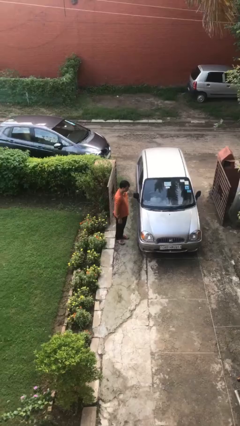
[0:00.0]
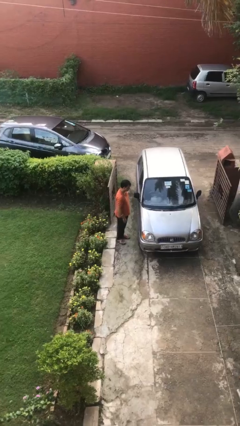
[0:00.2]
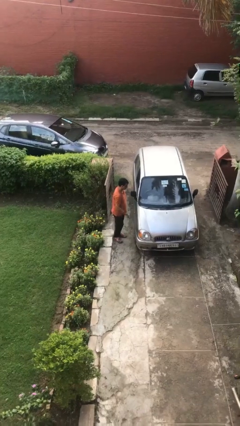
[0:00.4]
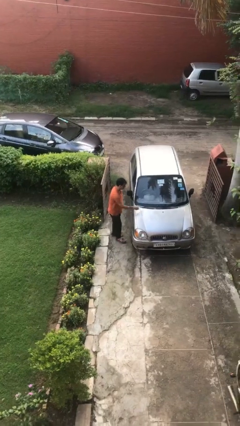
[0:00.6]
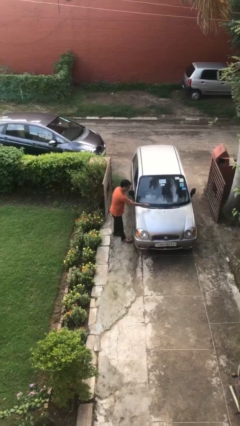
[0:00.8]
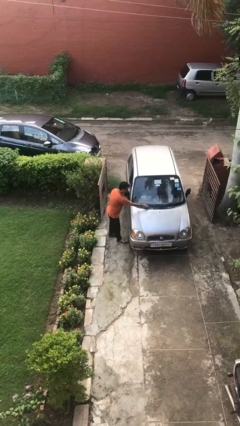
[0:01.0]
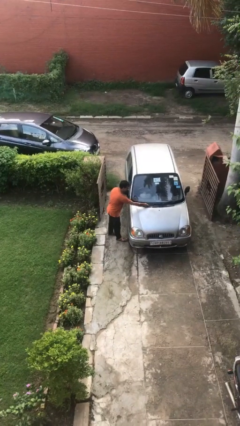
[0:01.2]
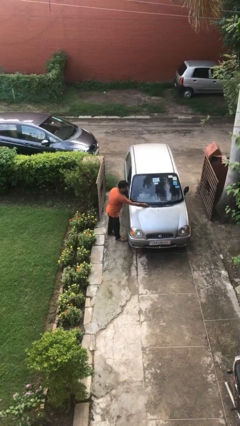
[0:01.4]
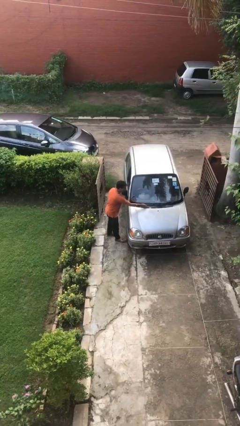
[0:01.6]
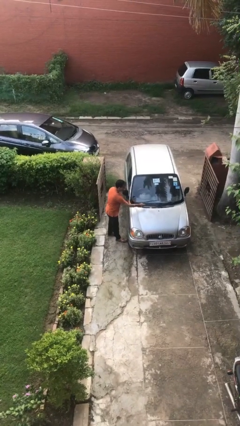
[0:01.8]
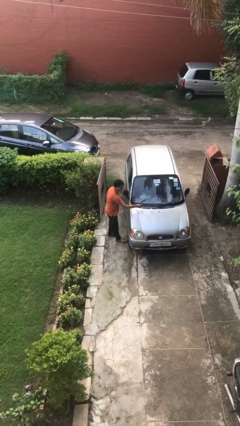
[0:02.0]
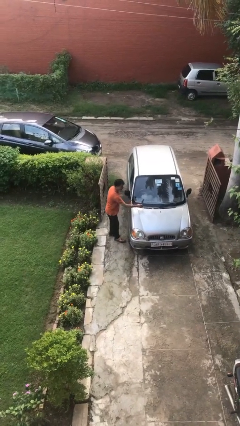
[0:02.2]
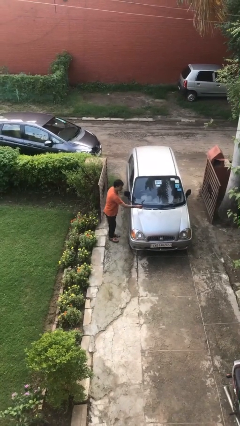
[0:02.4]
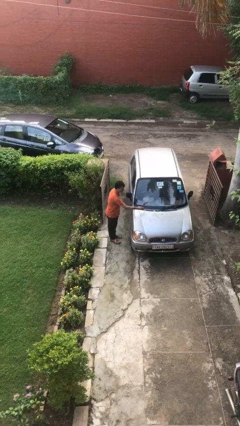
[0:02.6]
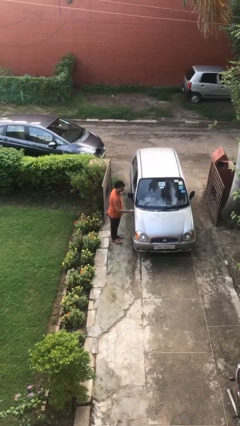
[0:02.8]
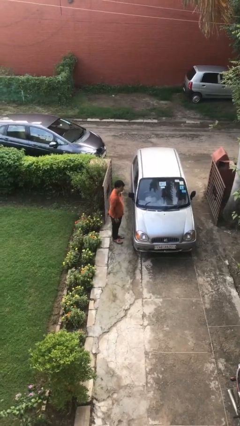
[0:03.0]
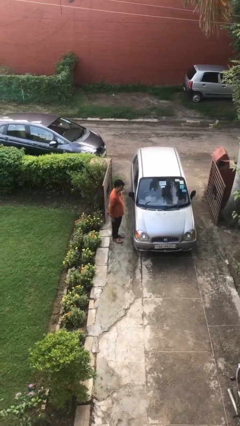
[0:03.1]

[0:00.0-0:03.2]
person flips up car wipers

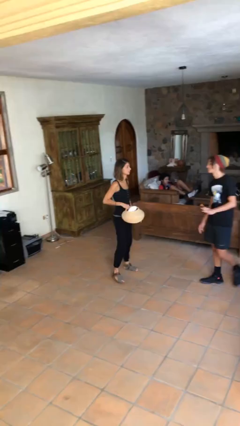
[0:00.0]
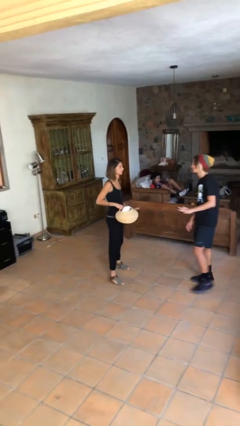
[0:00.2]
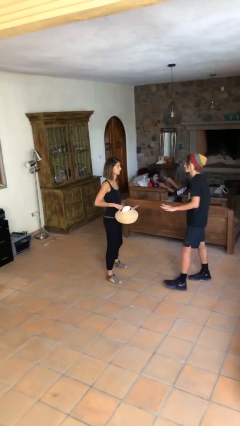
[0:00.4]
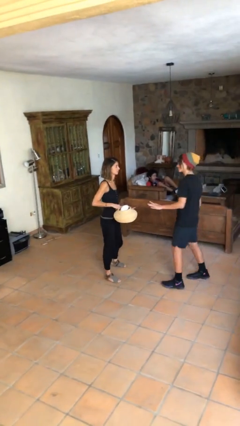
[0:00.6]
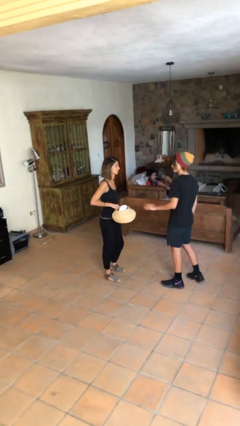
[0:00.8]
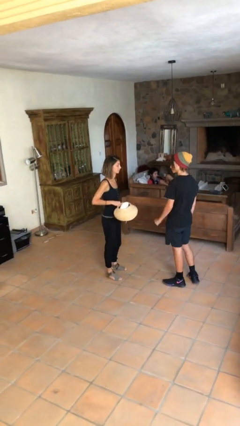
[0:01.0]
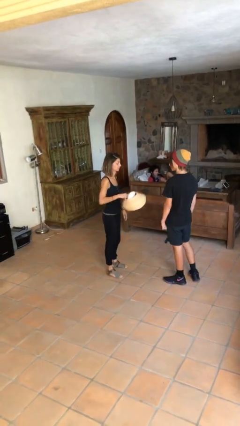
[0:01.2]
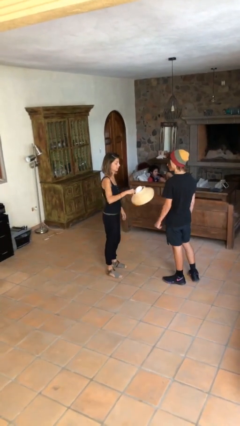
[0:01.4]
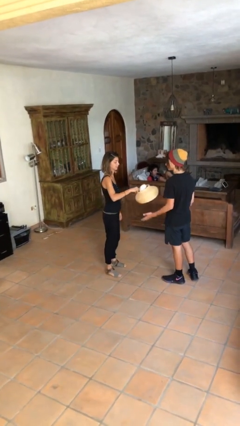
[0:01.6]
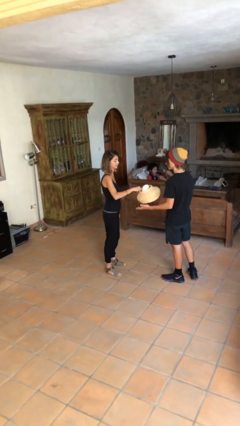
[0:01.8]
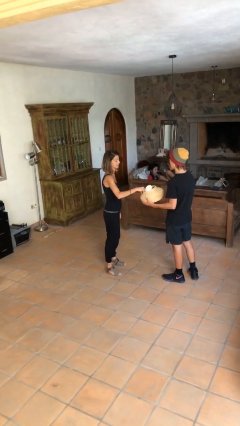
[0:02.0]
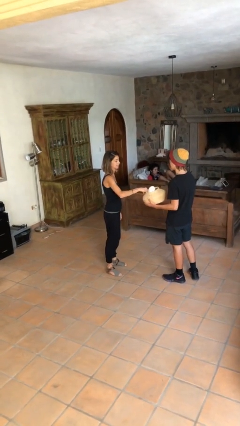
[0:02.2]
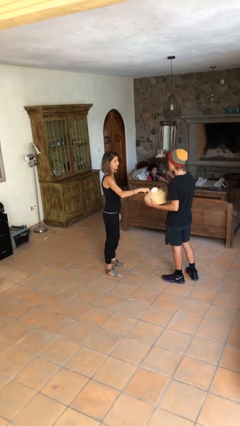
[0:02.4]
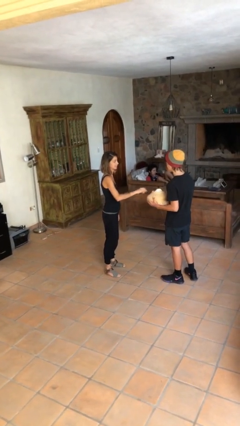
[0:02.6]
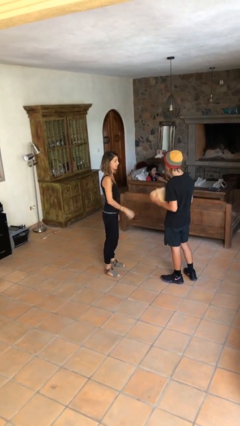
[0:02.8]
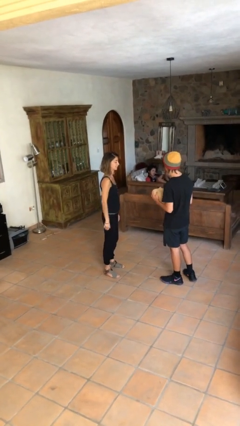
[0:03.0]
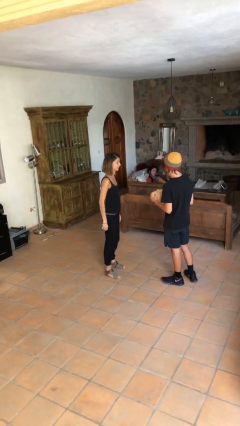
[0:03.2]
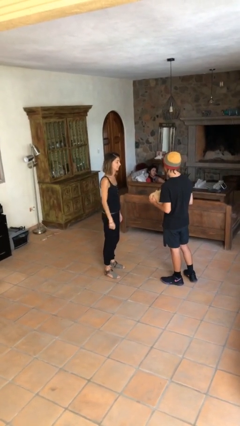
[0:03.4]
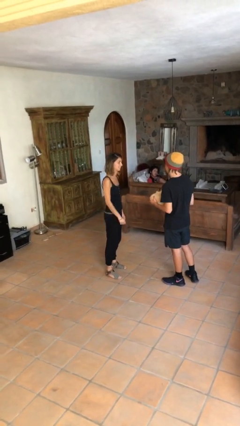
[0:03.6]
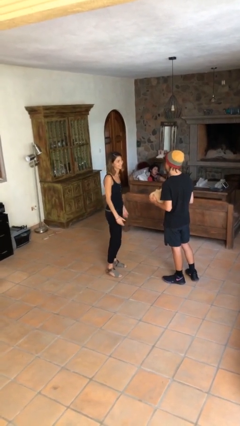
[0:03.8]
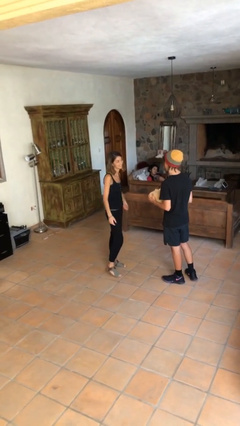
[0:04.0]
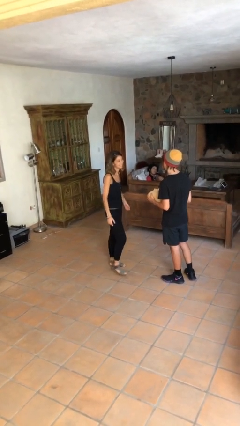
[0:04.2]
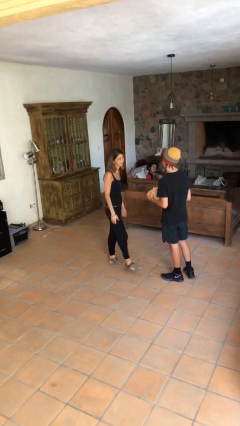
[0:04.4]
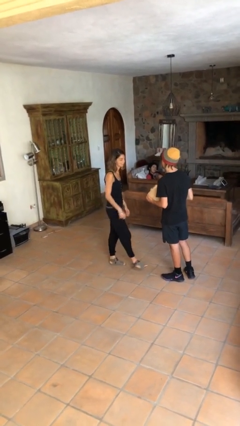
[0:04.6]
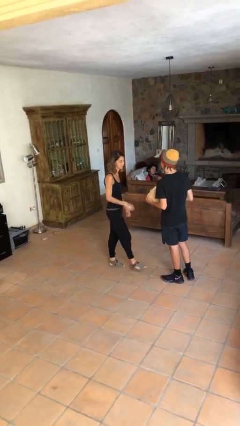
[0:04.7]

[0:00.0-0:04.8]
person transfers object to person

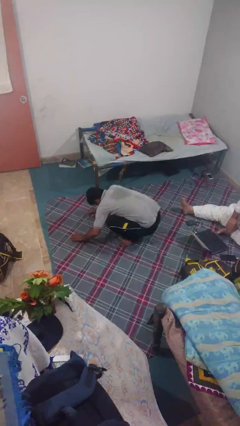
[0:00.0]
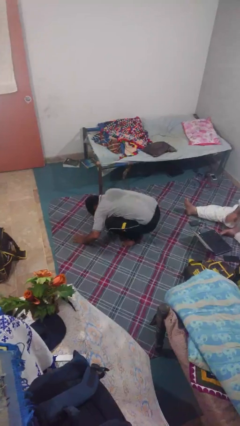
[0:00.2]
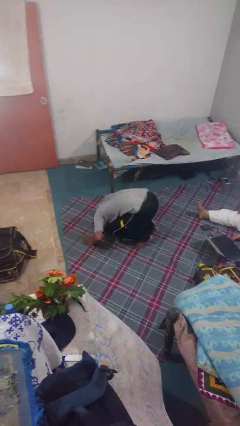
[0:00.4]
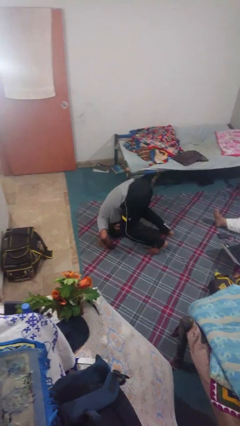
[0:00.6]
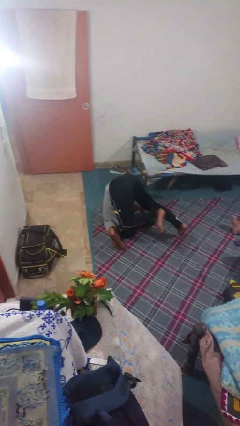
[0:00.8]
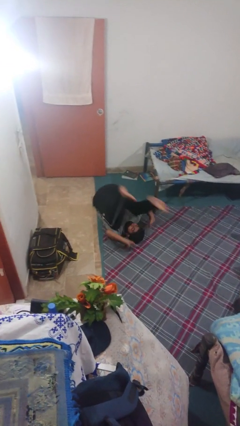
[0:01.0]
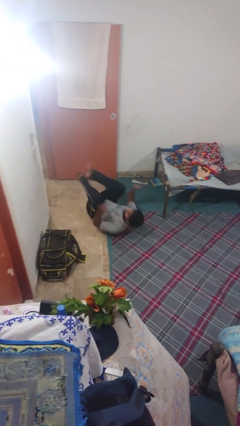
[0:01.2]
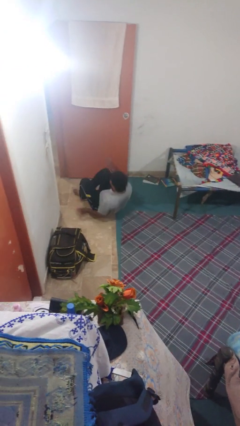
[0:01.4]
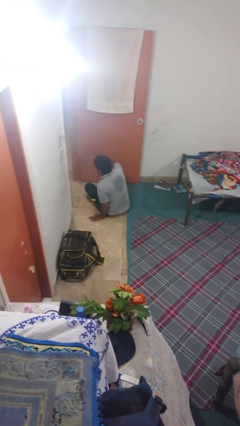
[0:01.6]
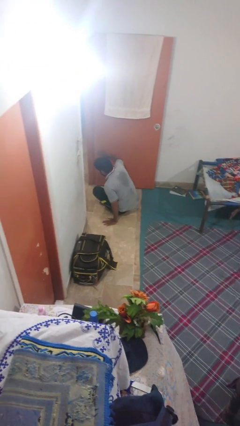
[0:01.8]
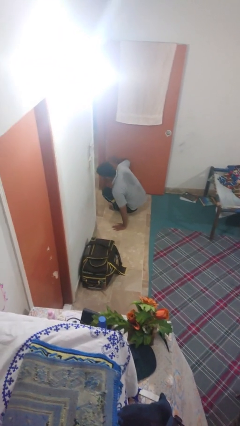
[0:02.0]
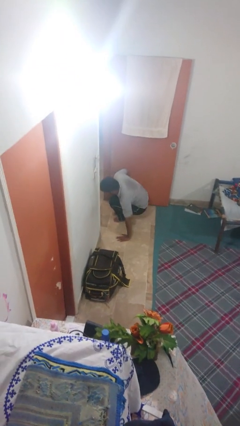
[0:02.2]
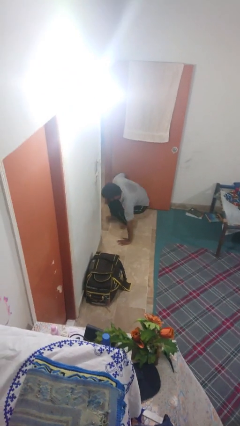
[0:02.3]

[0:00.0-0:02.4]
person somersaults

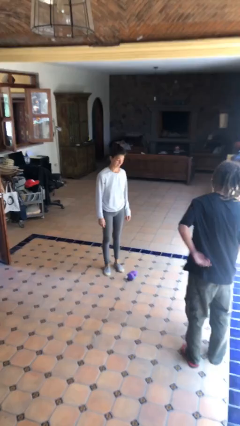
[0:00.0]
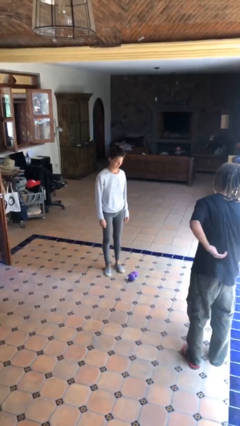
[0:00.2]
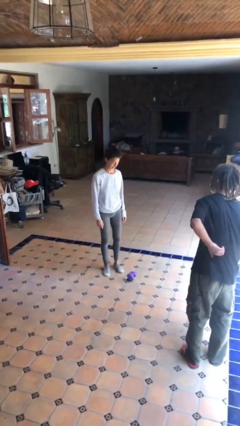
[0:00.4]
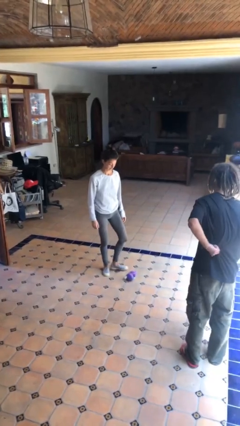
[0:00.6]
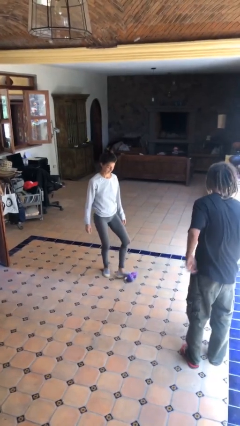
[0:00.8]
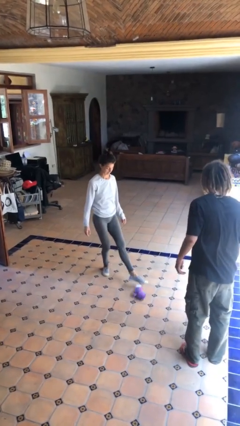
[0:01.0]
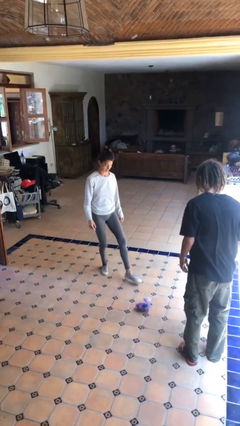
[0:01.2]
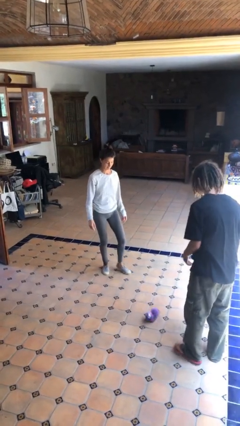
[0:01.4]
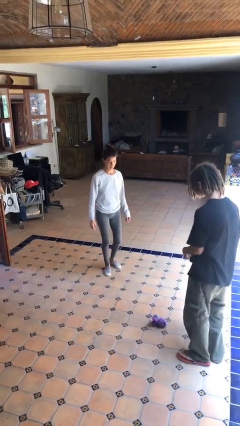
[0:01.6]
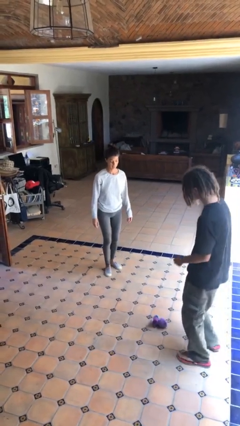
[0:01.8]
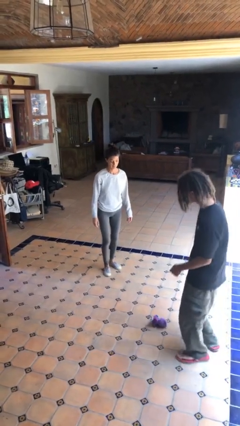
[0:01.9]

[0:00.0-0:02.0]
person kicks object to person

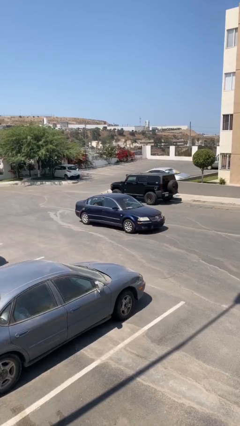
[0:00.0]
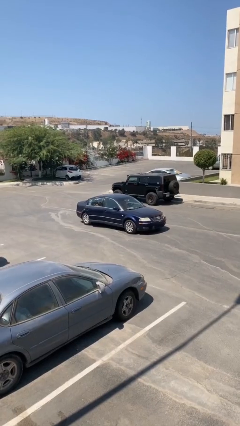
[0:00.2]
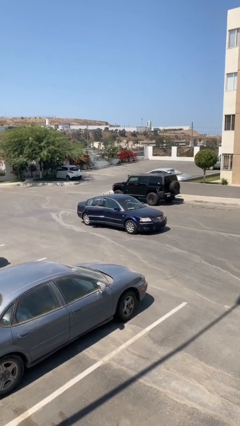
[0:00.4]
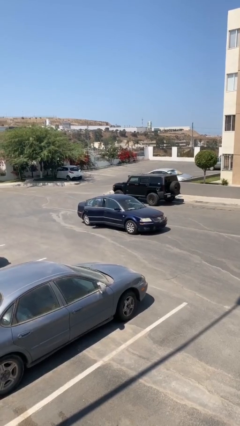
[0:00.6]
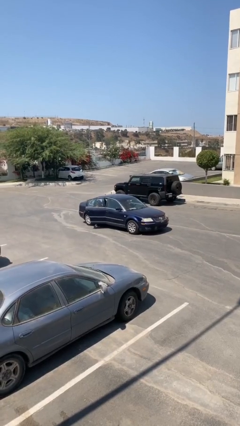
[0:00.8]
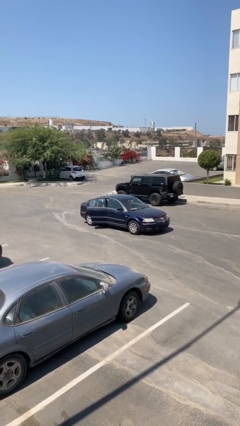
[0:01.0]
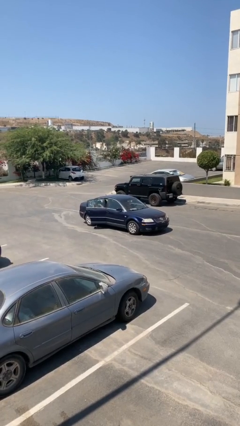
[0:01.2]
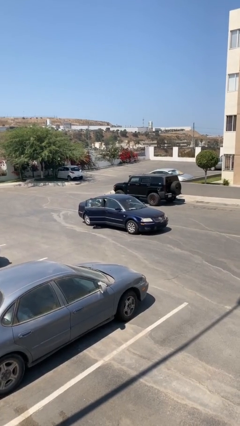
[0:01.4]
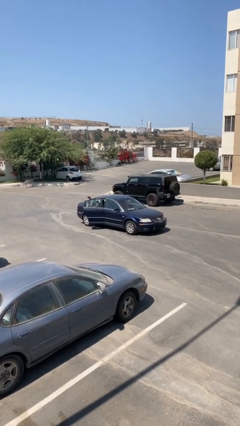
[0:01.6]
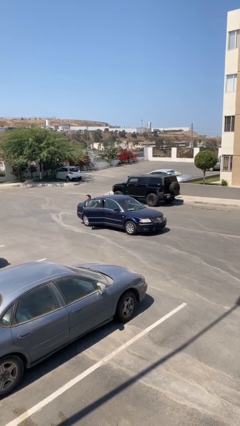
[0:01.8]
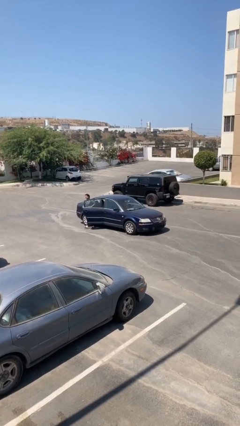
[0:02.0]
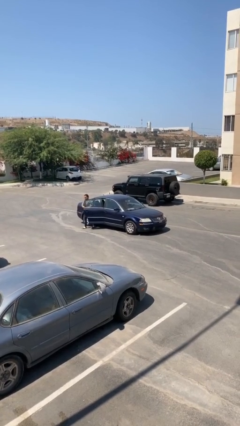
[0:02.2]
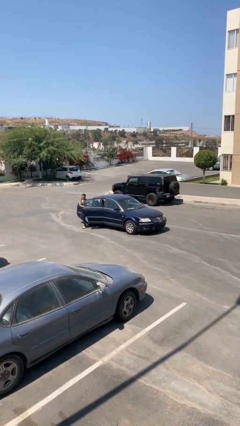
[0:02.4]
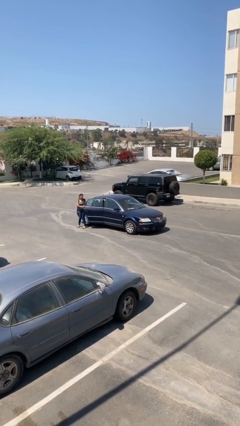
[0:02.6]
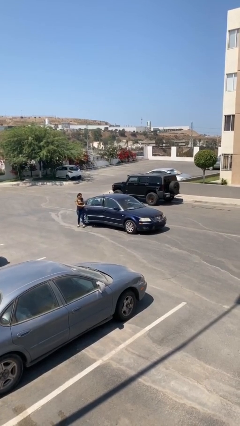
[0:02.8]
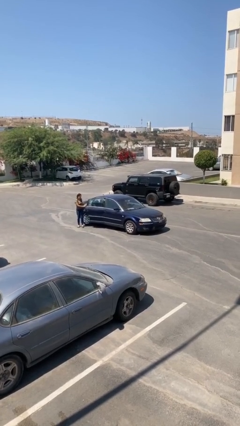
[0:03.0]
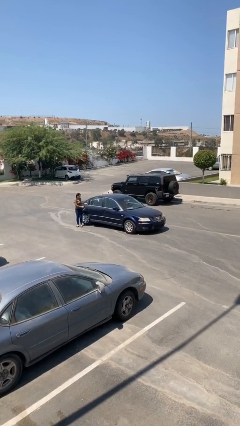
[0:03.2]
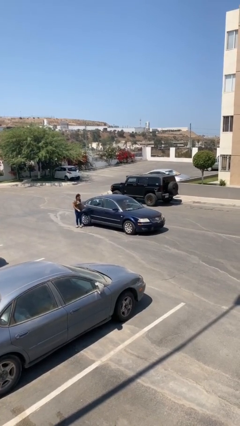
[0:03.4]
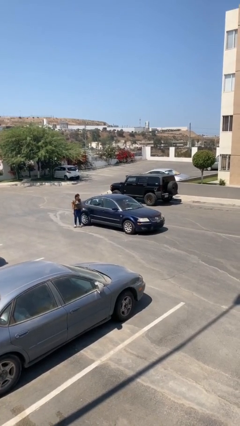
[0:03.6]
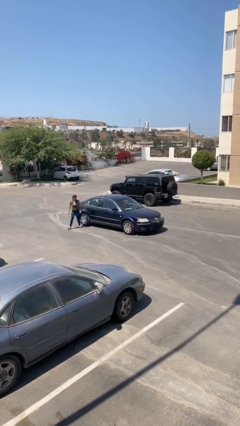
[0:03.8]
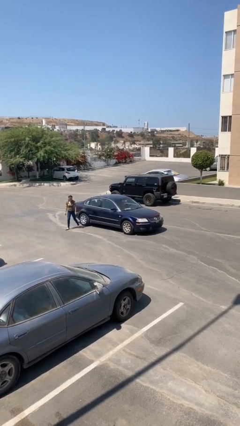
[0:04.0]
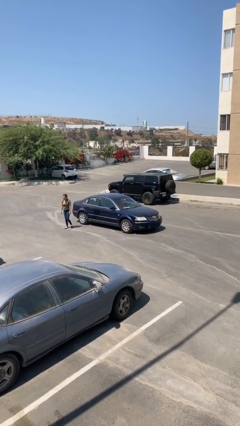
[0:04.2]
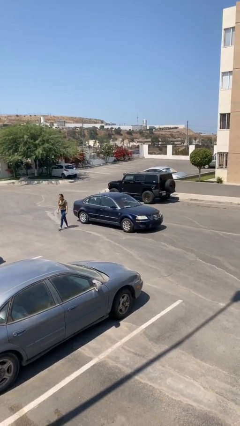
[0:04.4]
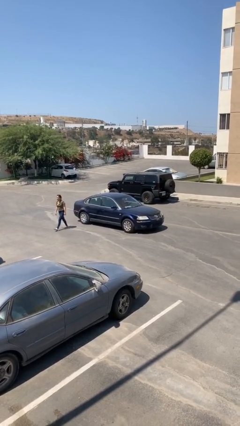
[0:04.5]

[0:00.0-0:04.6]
car drops off person

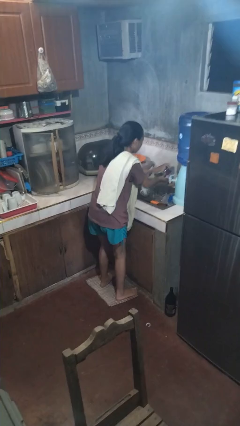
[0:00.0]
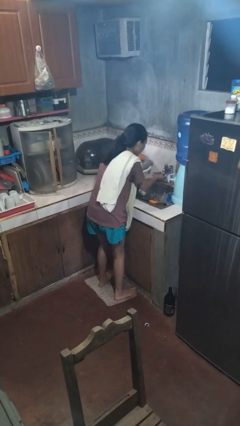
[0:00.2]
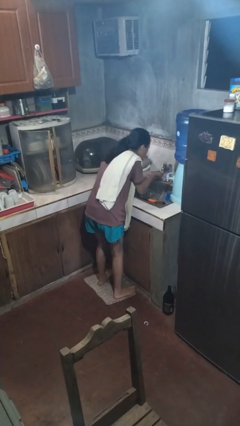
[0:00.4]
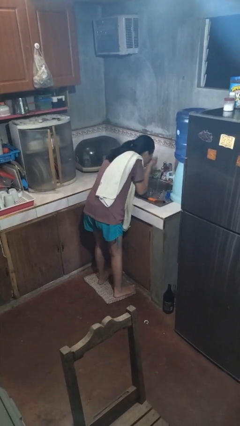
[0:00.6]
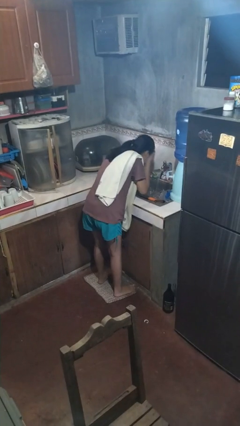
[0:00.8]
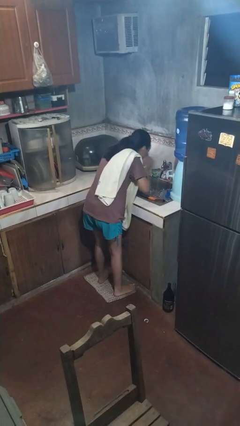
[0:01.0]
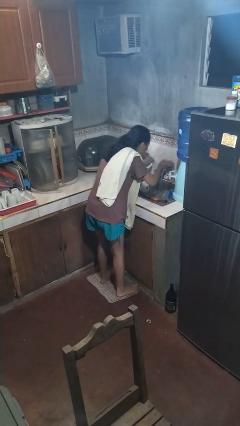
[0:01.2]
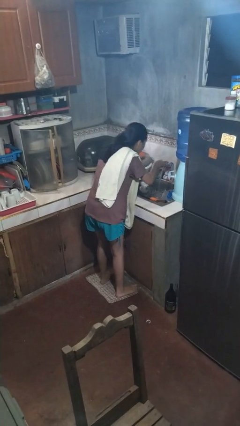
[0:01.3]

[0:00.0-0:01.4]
person washes face
